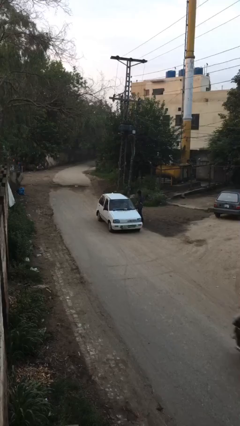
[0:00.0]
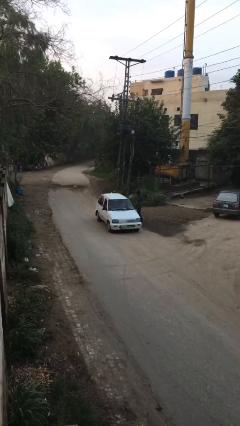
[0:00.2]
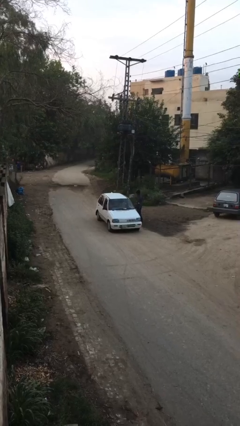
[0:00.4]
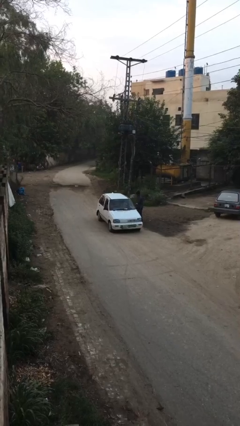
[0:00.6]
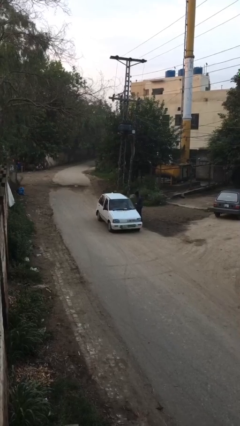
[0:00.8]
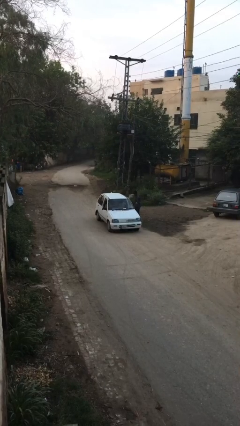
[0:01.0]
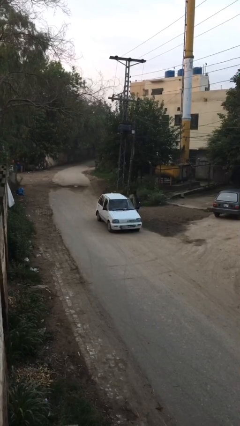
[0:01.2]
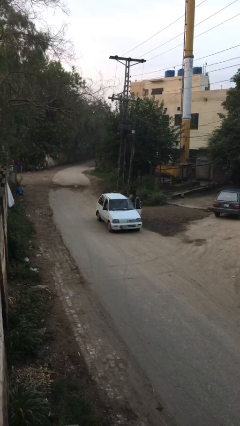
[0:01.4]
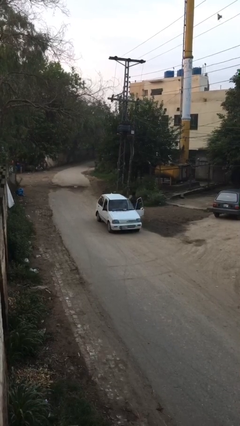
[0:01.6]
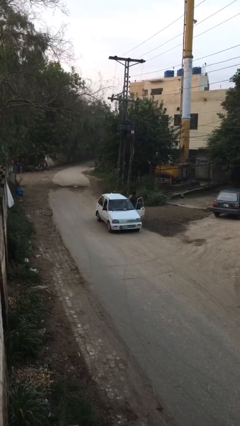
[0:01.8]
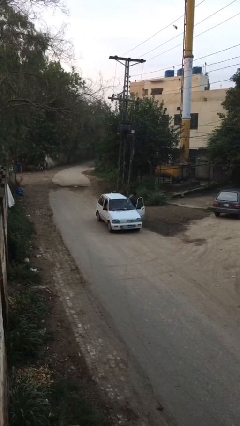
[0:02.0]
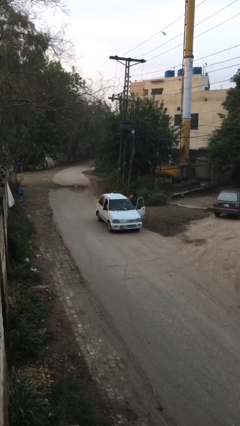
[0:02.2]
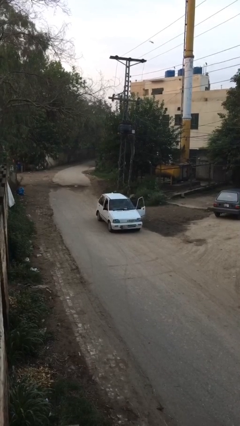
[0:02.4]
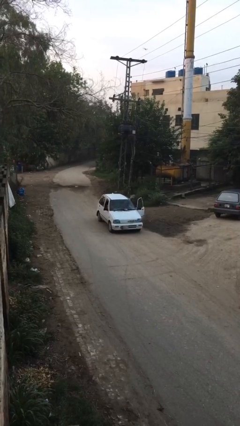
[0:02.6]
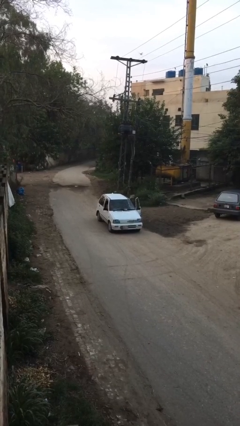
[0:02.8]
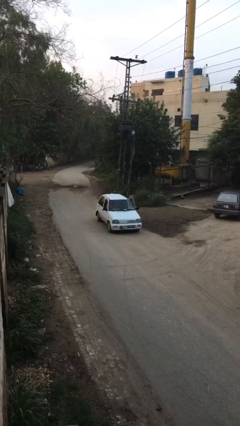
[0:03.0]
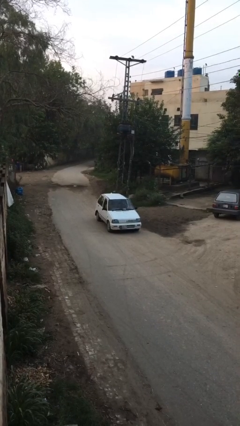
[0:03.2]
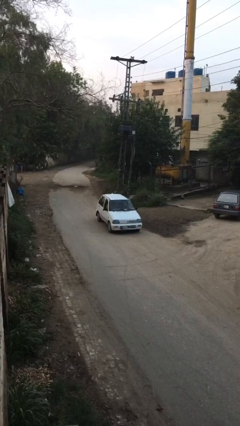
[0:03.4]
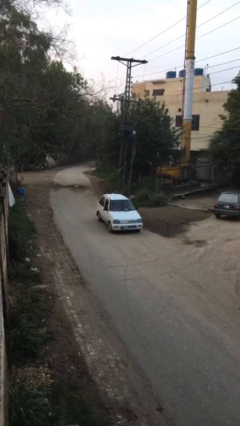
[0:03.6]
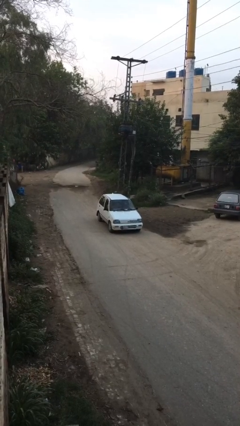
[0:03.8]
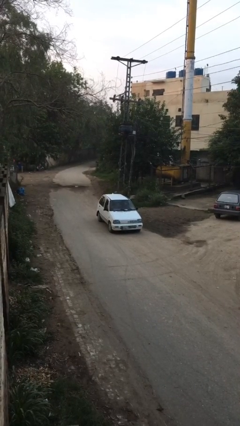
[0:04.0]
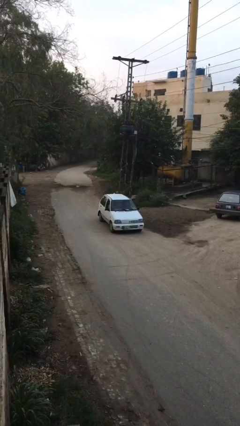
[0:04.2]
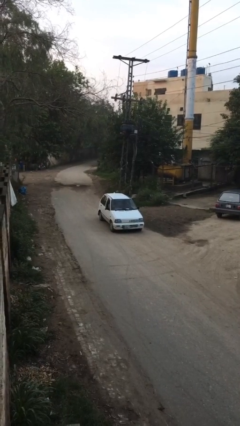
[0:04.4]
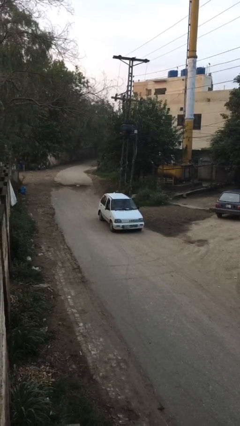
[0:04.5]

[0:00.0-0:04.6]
car picks up person

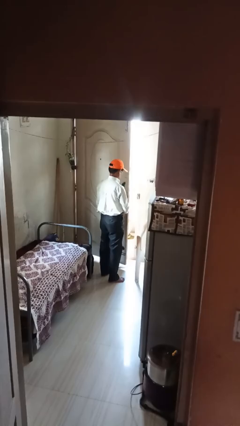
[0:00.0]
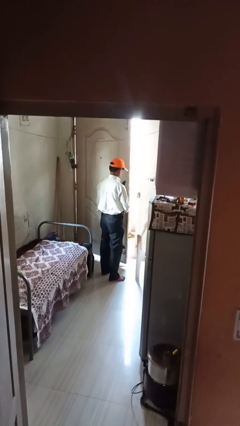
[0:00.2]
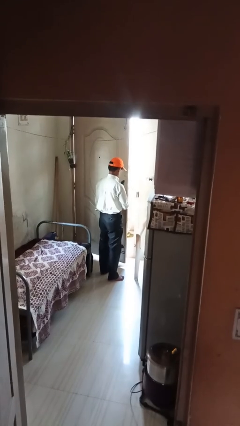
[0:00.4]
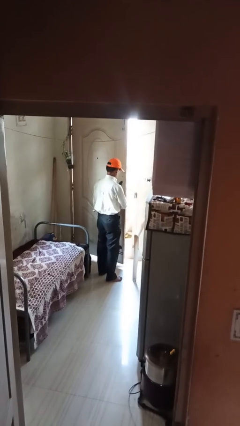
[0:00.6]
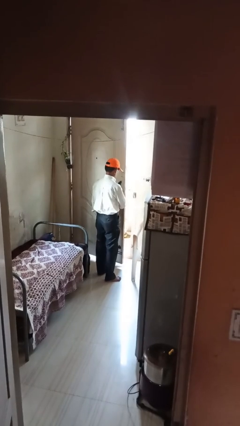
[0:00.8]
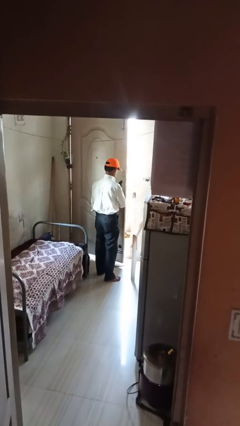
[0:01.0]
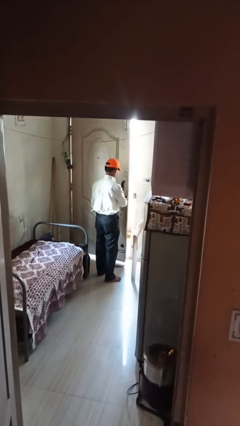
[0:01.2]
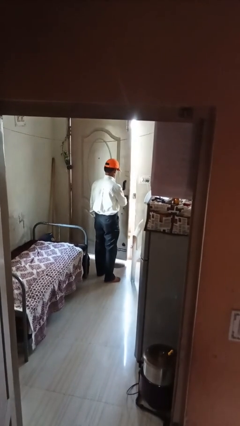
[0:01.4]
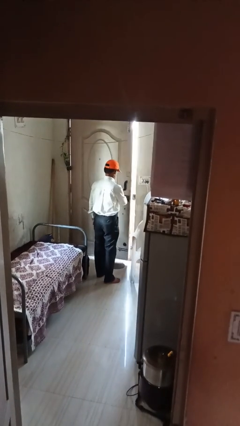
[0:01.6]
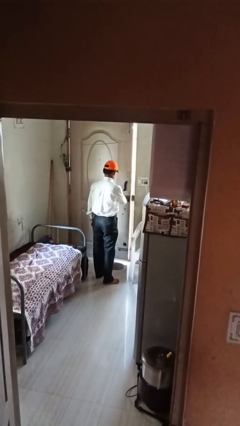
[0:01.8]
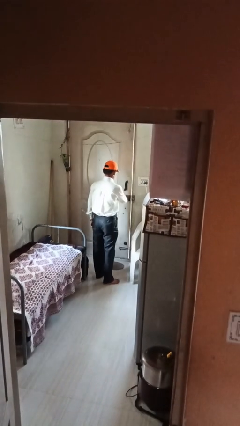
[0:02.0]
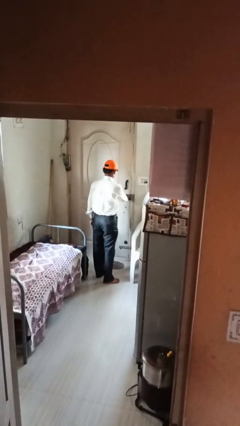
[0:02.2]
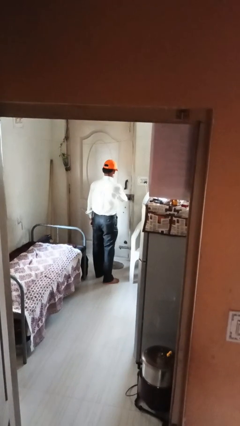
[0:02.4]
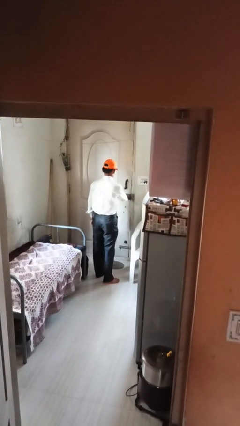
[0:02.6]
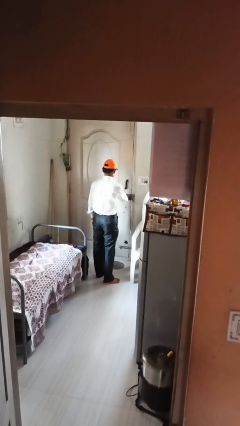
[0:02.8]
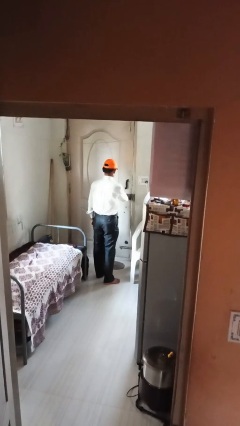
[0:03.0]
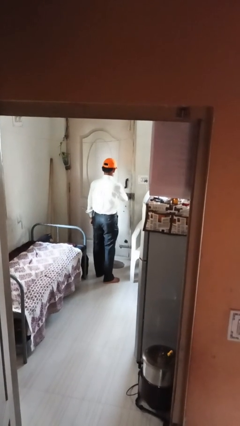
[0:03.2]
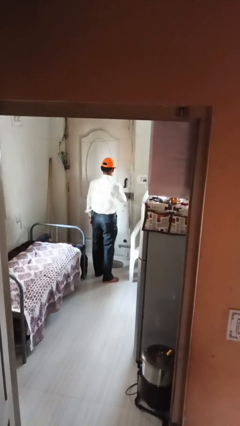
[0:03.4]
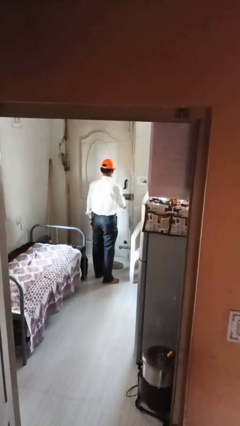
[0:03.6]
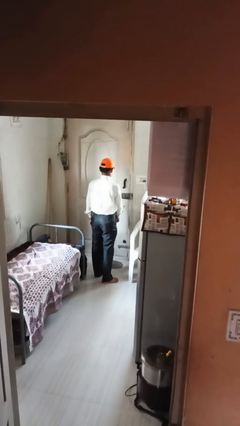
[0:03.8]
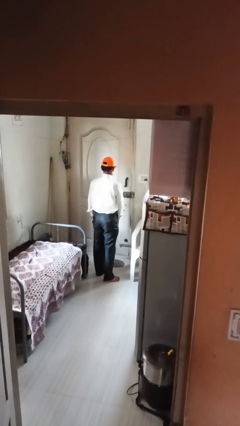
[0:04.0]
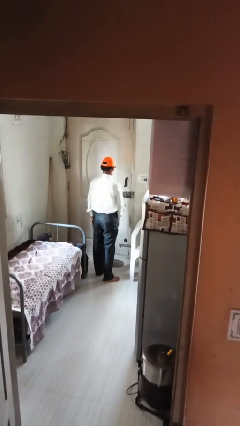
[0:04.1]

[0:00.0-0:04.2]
person closes facility door

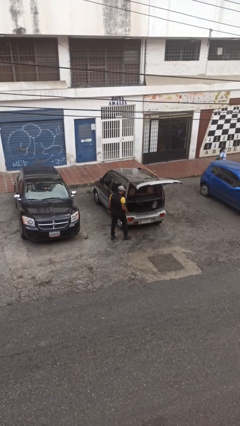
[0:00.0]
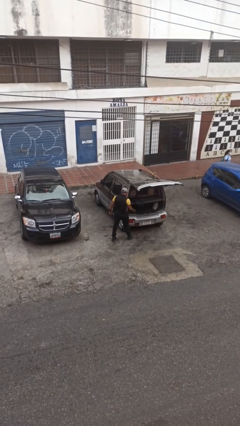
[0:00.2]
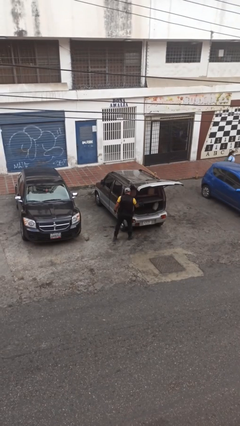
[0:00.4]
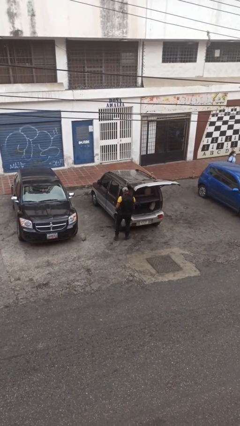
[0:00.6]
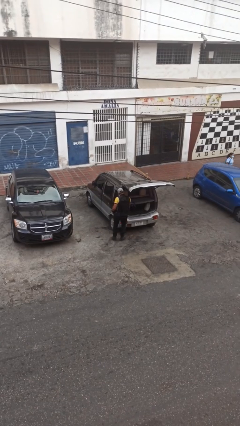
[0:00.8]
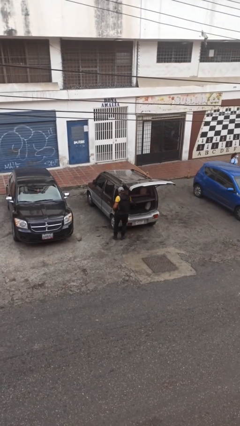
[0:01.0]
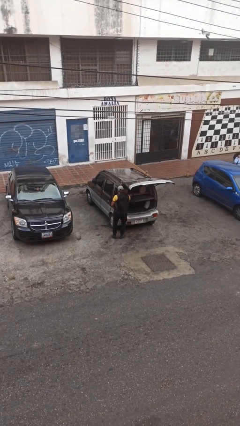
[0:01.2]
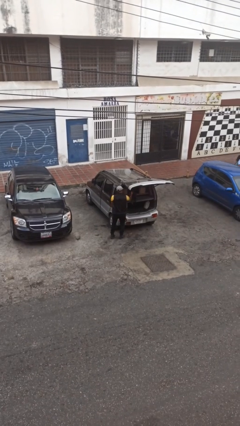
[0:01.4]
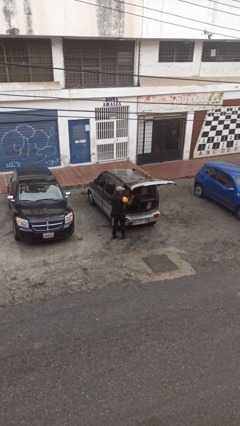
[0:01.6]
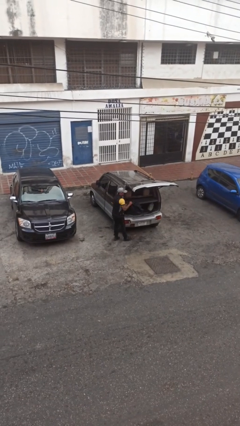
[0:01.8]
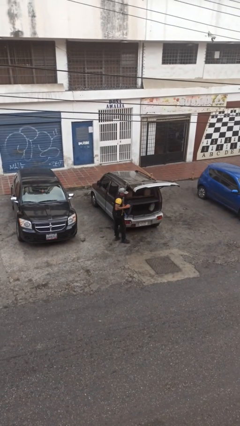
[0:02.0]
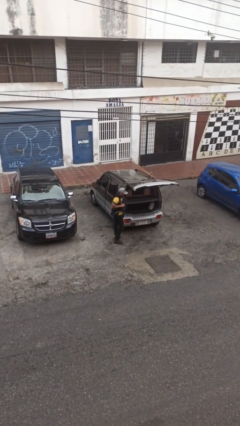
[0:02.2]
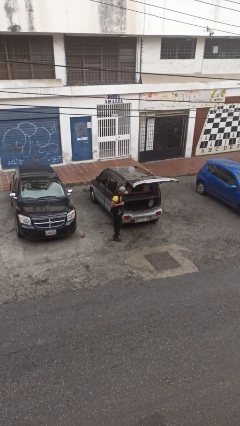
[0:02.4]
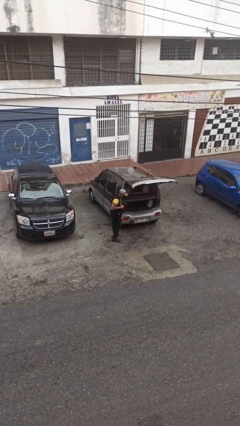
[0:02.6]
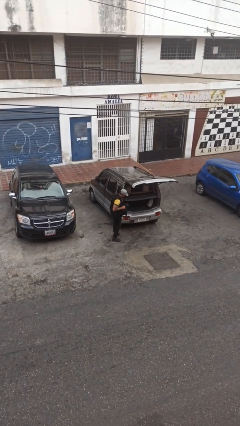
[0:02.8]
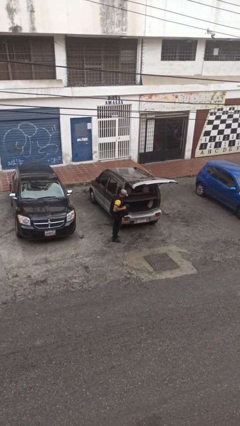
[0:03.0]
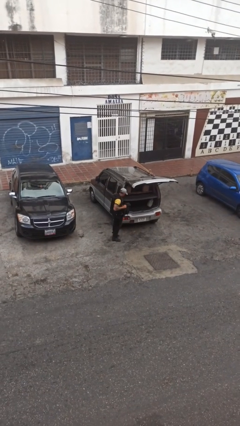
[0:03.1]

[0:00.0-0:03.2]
person unloads car

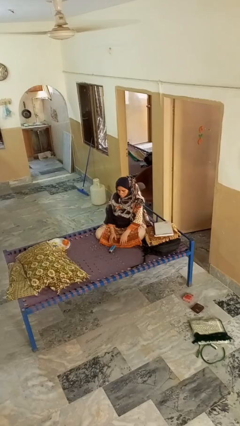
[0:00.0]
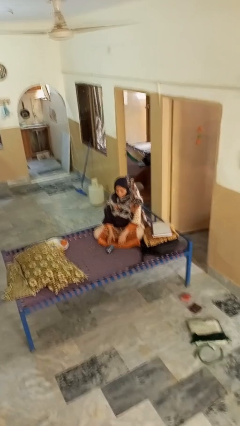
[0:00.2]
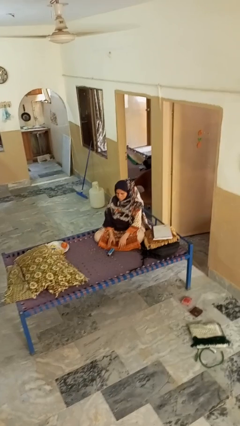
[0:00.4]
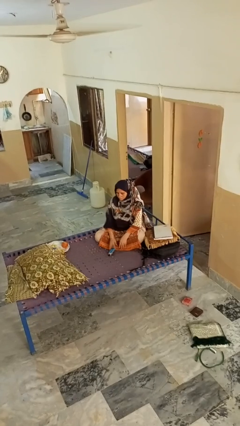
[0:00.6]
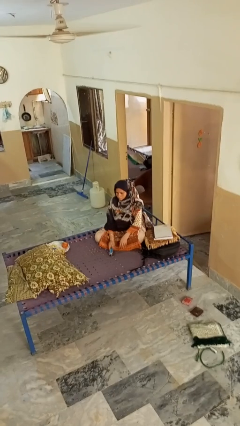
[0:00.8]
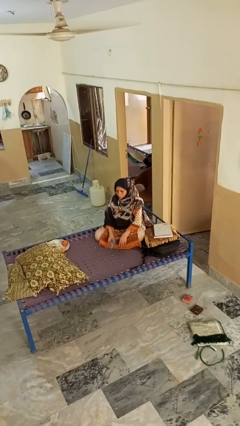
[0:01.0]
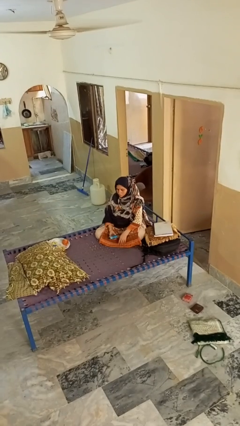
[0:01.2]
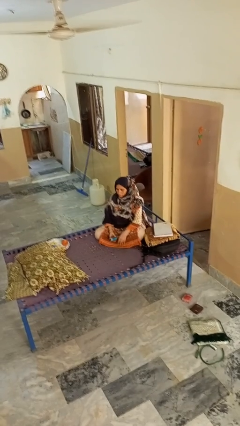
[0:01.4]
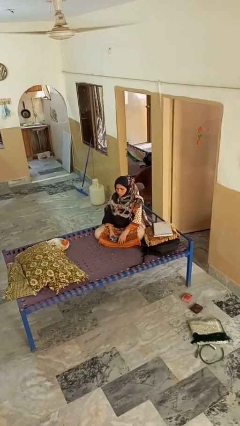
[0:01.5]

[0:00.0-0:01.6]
person picks up object from floor

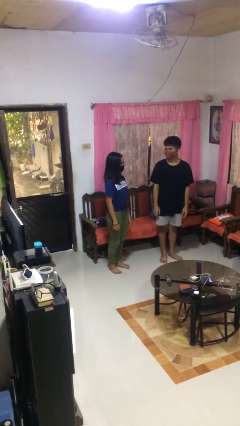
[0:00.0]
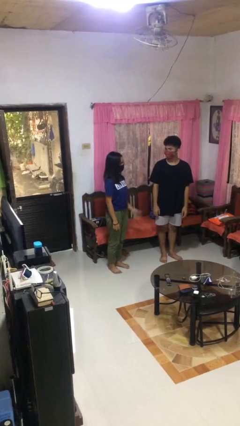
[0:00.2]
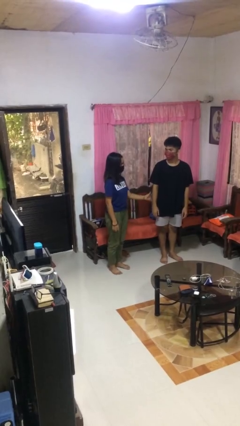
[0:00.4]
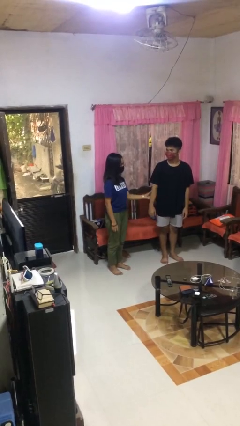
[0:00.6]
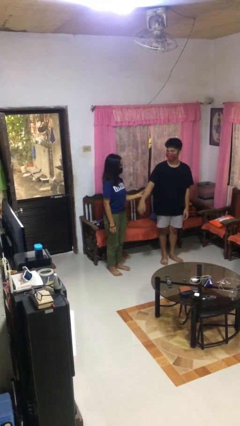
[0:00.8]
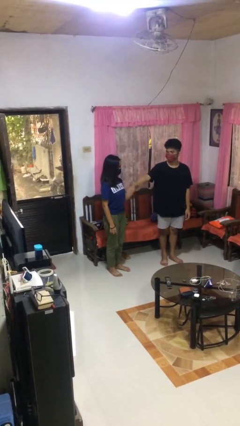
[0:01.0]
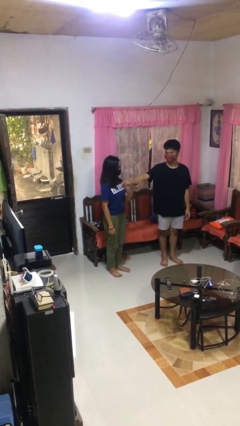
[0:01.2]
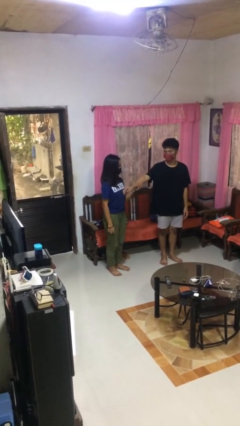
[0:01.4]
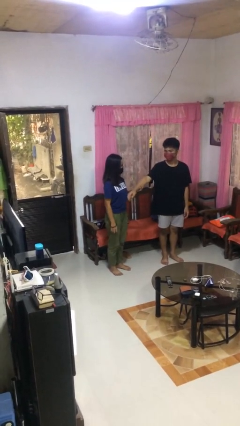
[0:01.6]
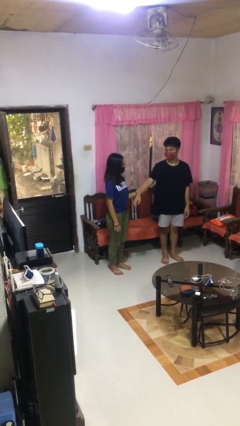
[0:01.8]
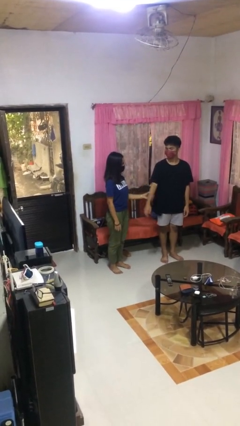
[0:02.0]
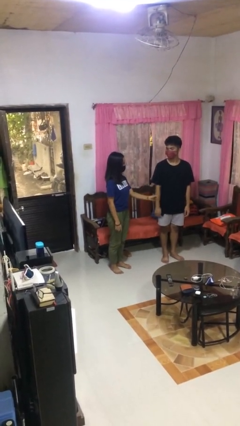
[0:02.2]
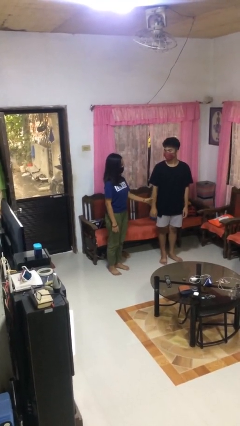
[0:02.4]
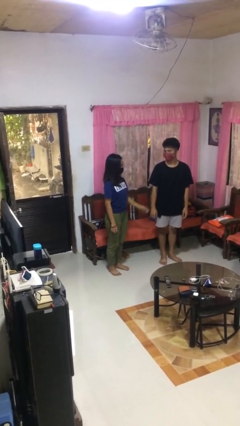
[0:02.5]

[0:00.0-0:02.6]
person grabs person by forearm

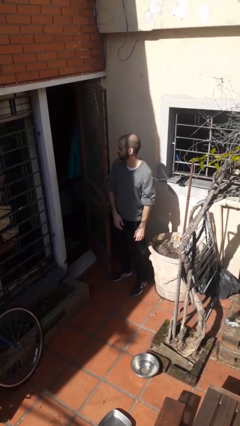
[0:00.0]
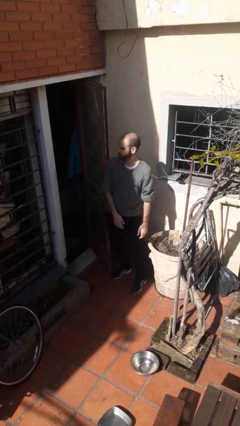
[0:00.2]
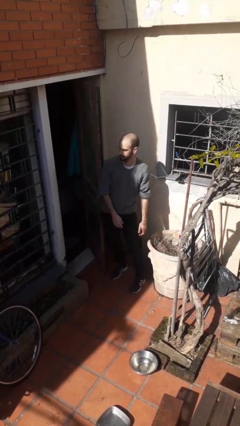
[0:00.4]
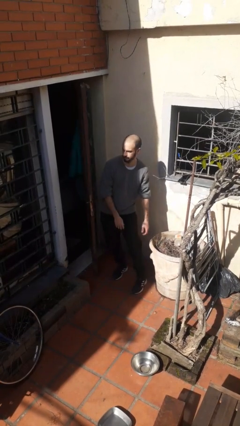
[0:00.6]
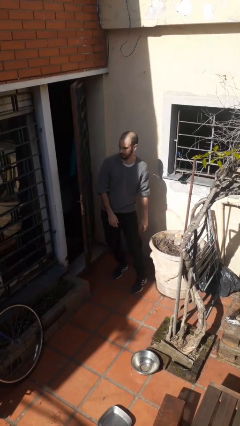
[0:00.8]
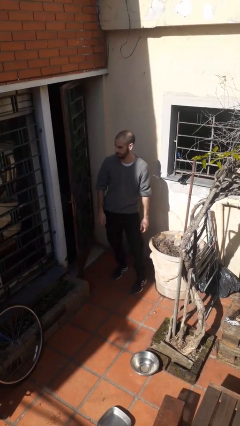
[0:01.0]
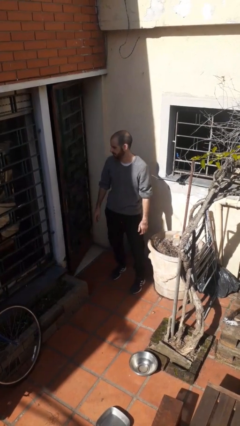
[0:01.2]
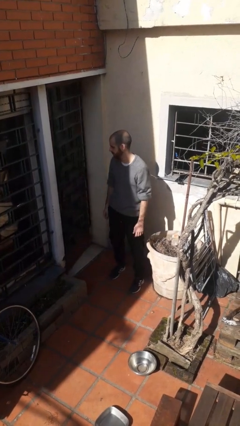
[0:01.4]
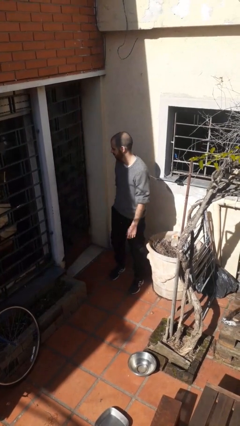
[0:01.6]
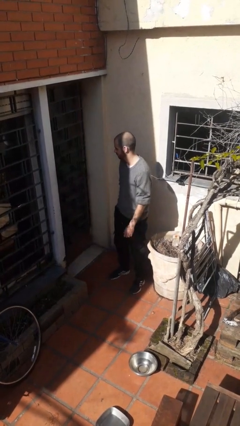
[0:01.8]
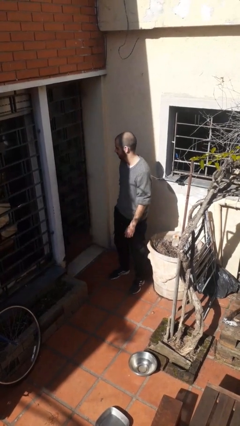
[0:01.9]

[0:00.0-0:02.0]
person closes door with hip
